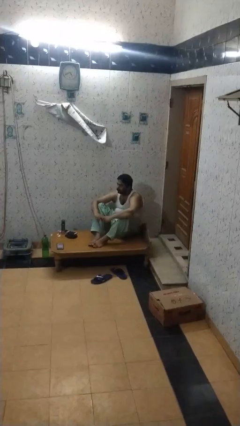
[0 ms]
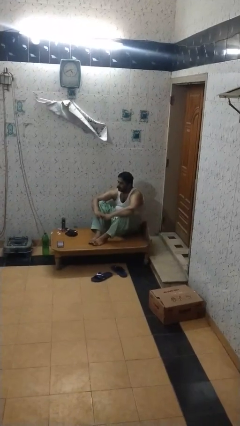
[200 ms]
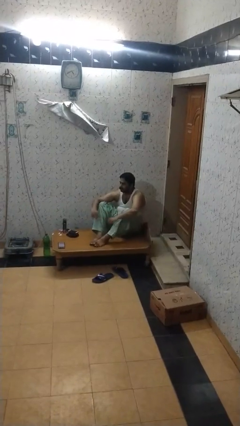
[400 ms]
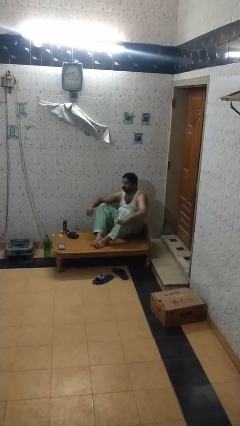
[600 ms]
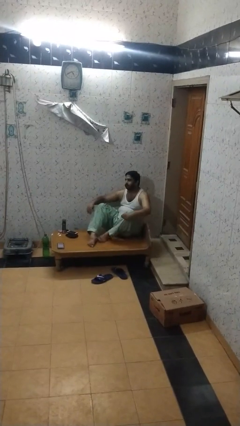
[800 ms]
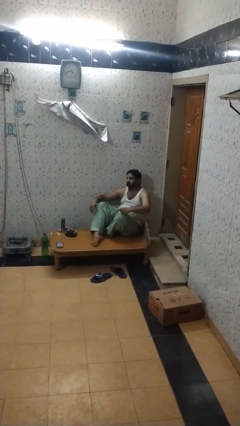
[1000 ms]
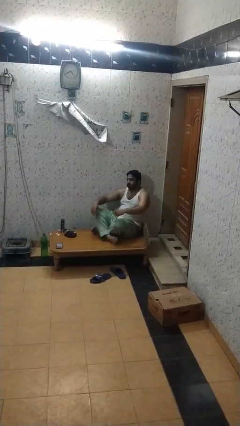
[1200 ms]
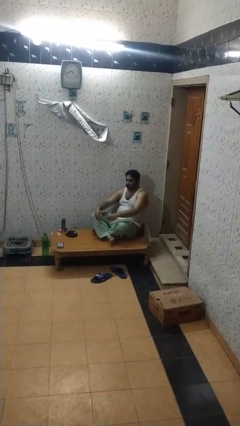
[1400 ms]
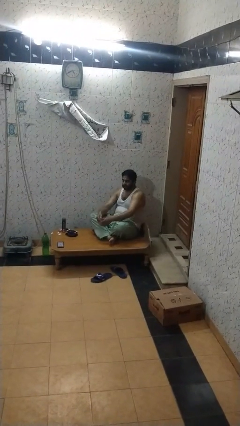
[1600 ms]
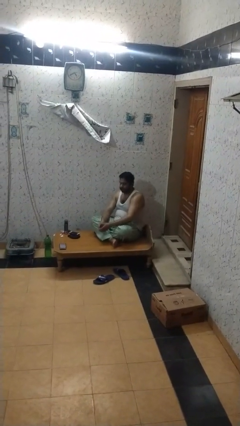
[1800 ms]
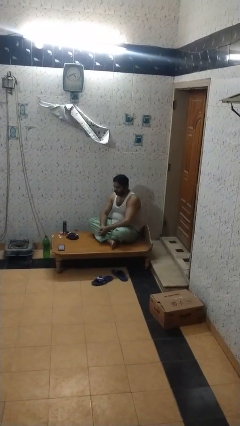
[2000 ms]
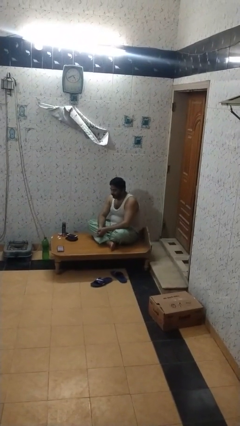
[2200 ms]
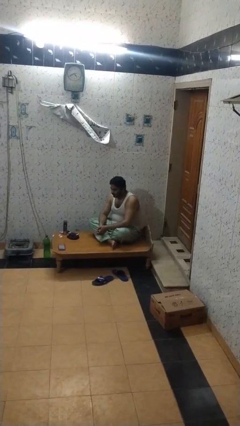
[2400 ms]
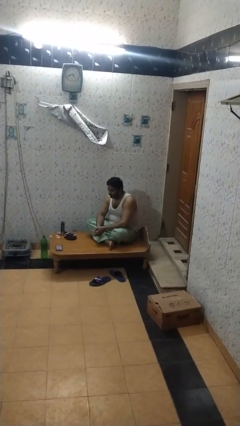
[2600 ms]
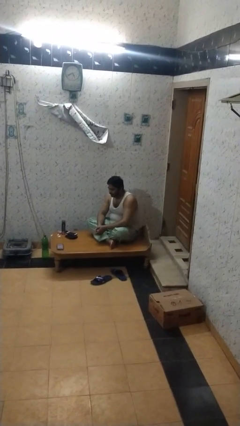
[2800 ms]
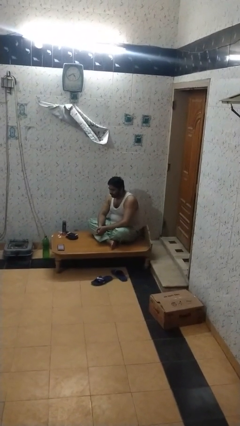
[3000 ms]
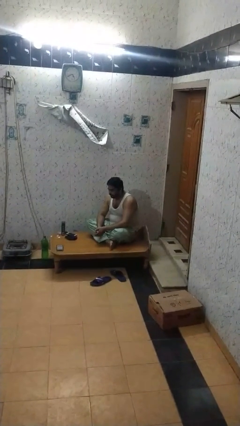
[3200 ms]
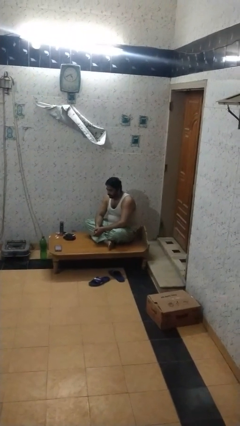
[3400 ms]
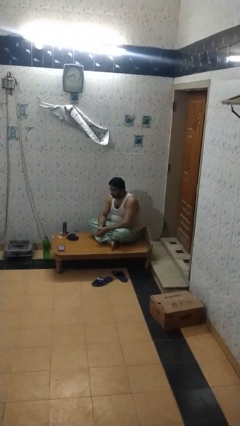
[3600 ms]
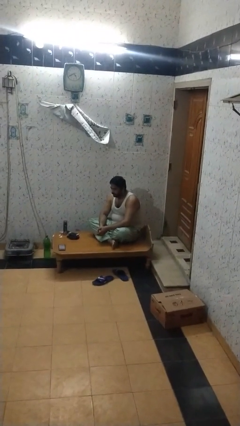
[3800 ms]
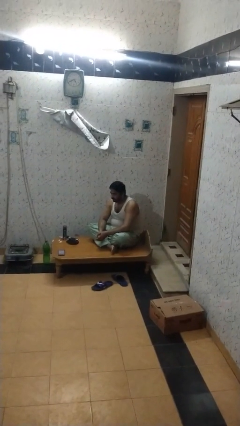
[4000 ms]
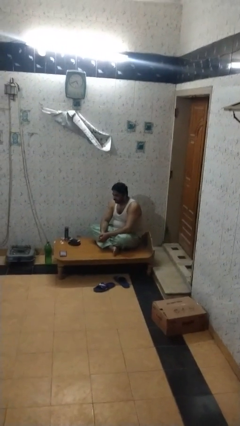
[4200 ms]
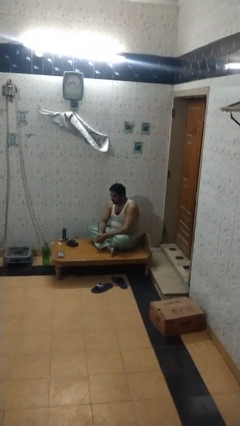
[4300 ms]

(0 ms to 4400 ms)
person crosses legs

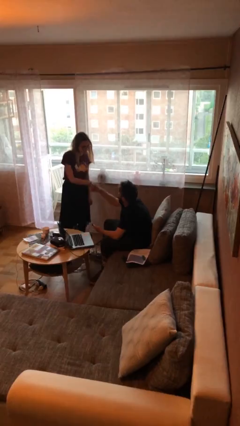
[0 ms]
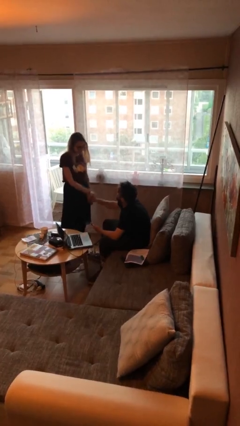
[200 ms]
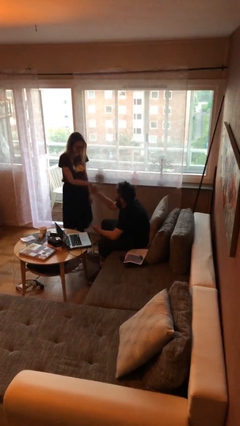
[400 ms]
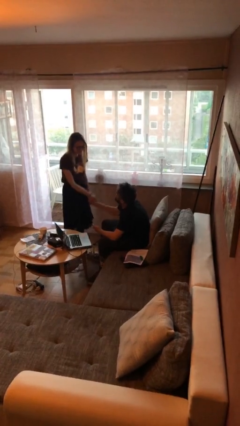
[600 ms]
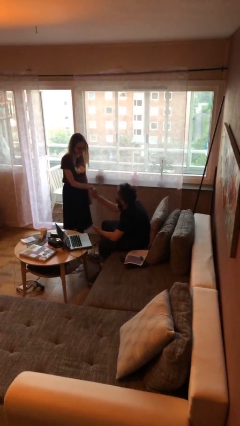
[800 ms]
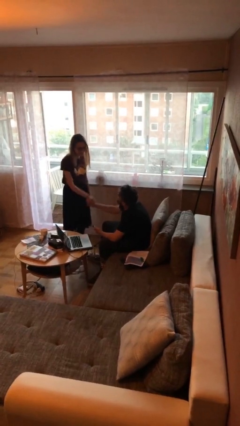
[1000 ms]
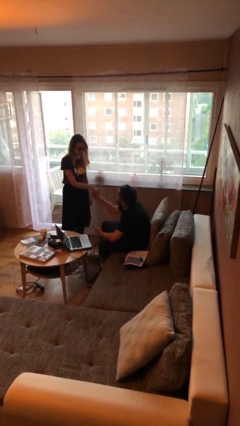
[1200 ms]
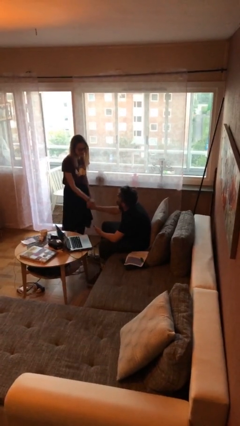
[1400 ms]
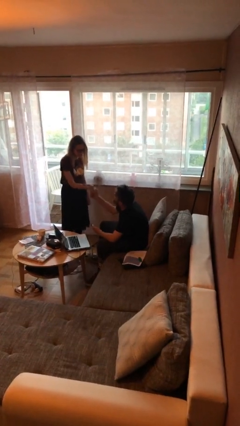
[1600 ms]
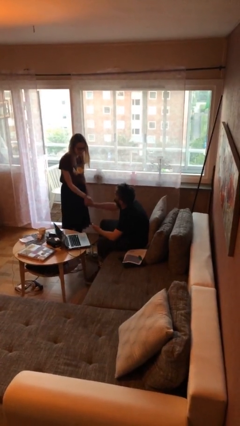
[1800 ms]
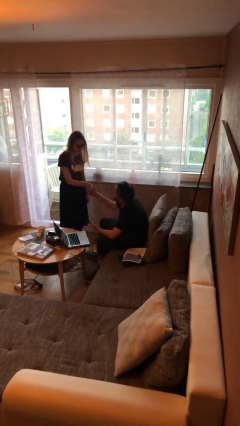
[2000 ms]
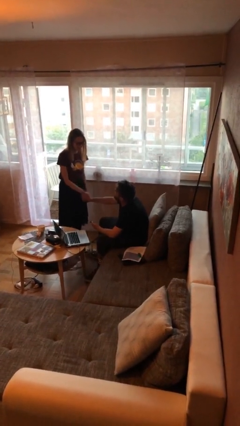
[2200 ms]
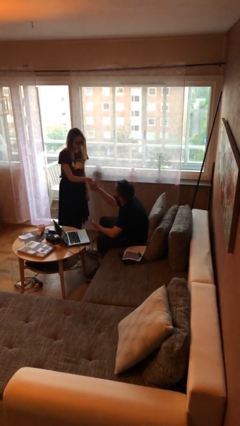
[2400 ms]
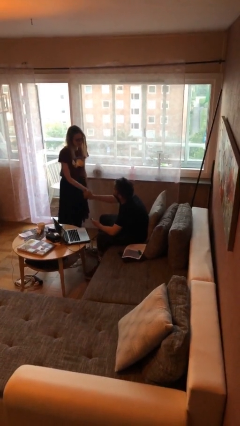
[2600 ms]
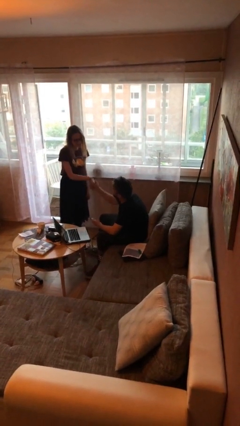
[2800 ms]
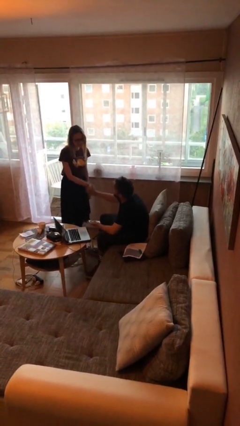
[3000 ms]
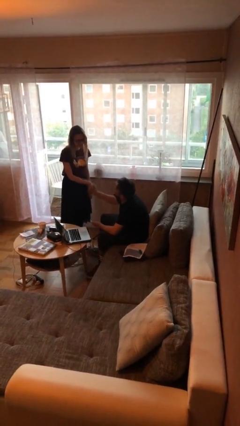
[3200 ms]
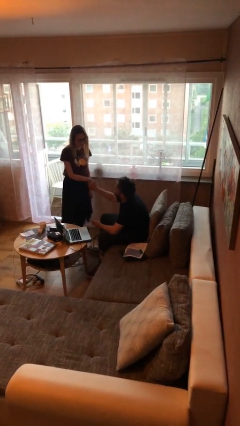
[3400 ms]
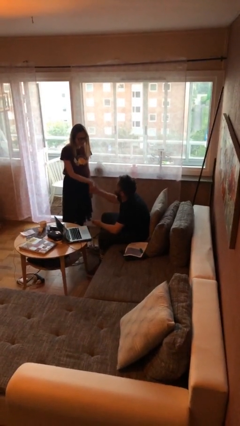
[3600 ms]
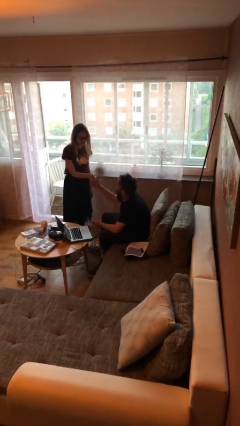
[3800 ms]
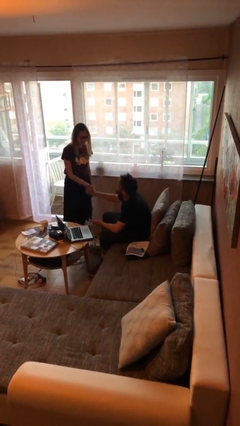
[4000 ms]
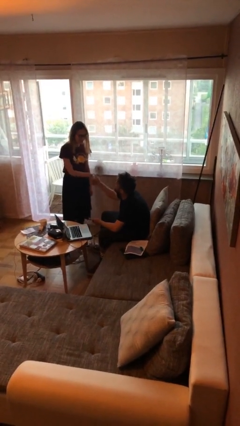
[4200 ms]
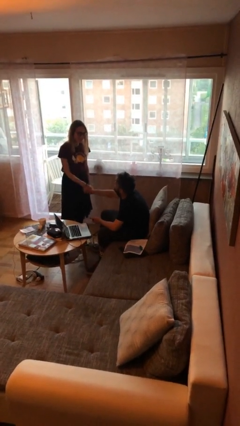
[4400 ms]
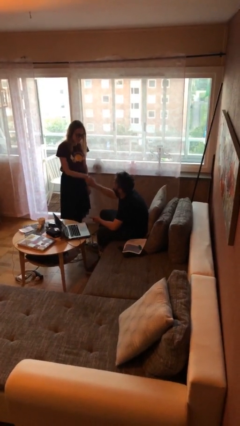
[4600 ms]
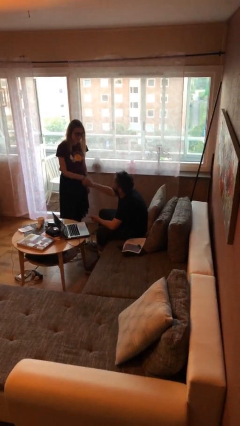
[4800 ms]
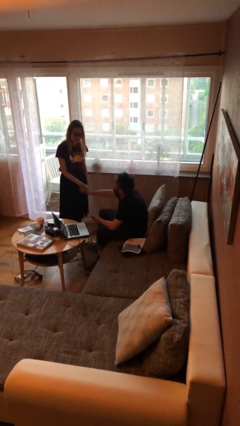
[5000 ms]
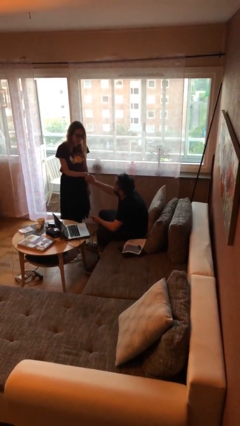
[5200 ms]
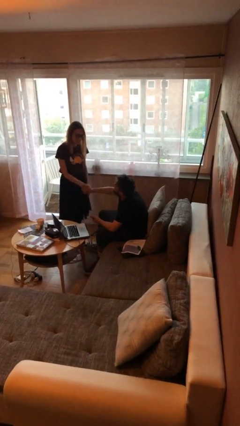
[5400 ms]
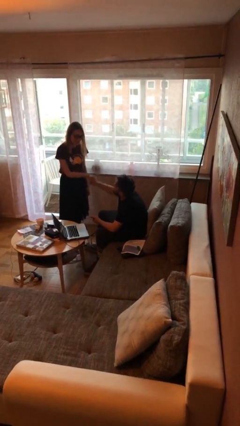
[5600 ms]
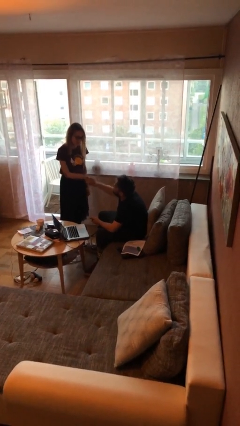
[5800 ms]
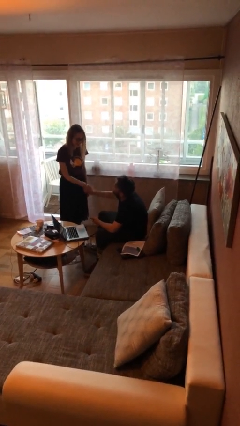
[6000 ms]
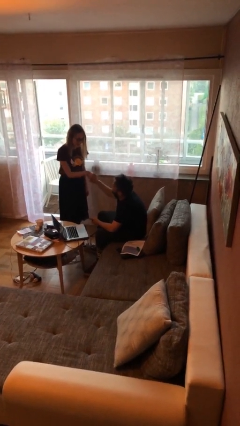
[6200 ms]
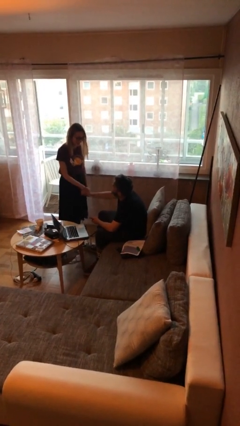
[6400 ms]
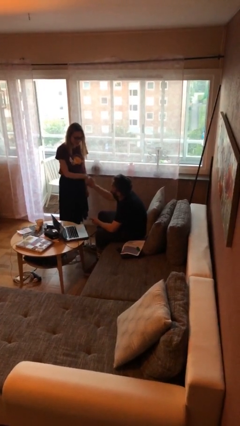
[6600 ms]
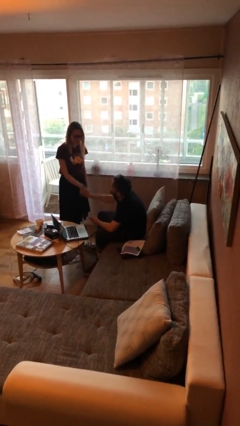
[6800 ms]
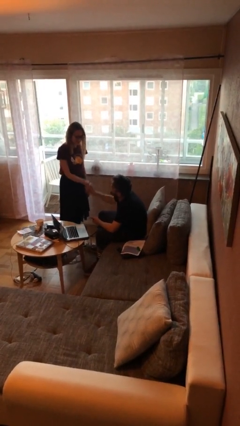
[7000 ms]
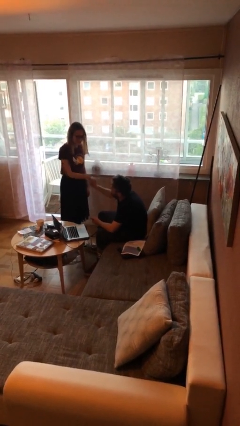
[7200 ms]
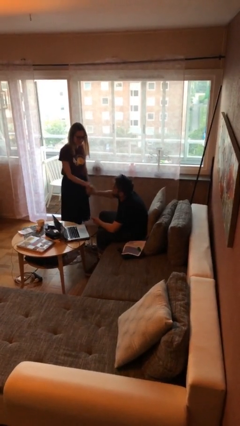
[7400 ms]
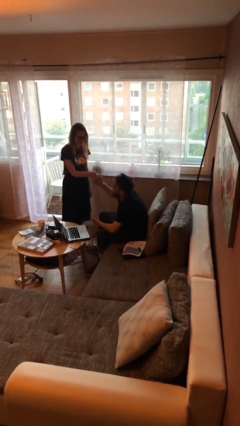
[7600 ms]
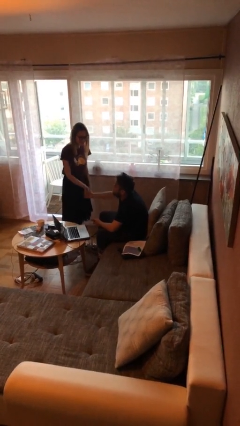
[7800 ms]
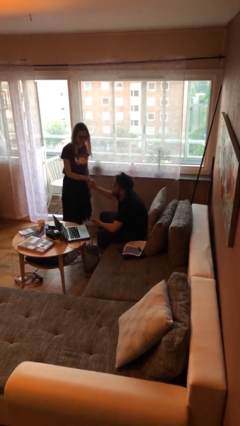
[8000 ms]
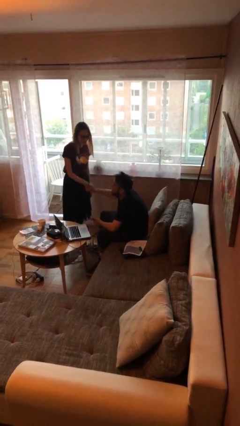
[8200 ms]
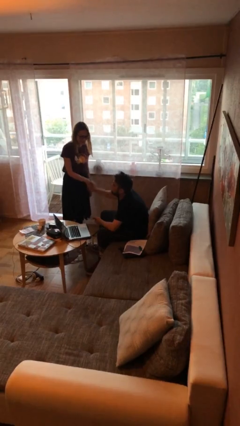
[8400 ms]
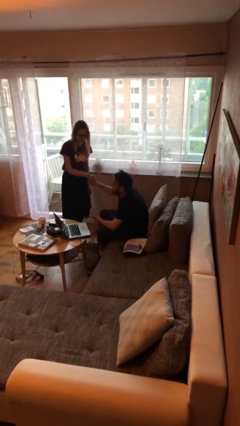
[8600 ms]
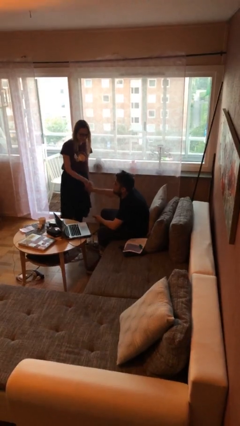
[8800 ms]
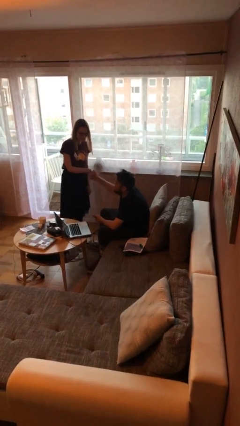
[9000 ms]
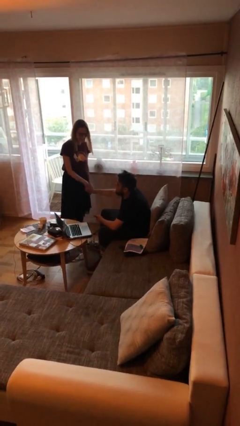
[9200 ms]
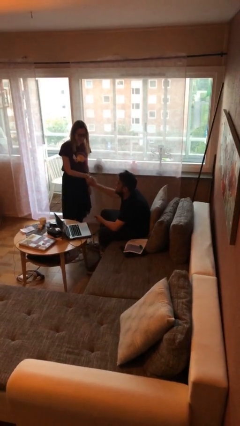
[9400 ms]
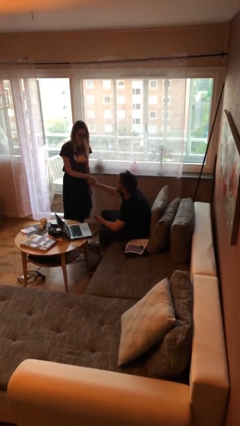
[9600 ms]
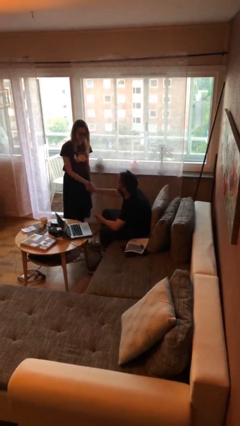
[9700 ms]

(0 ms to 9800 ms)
person shakes hand

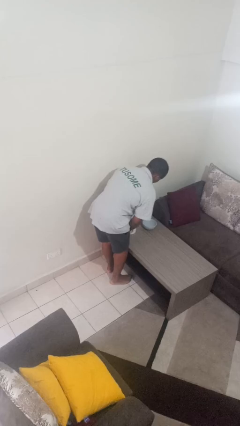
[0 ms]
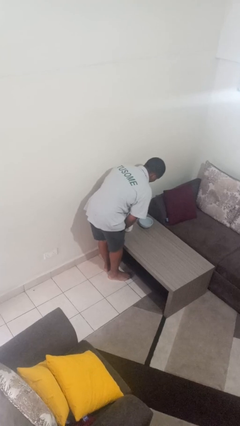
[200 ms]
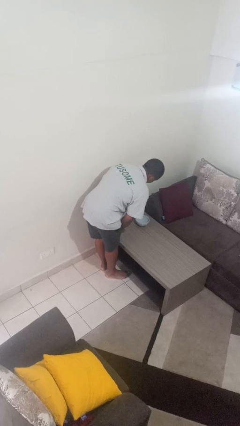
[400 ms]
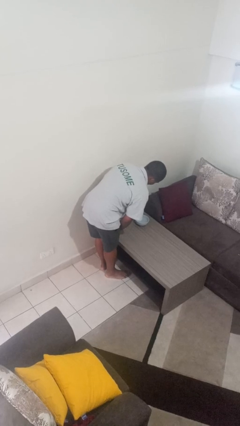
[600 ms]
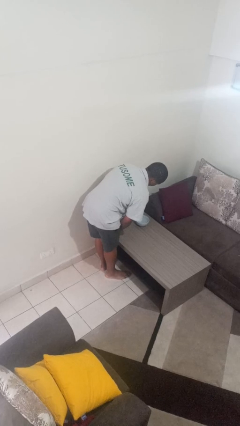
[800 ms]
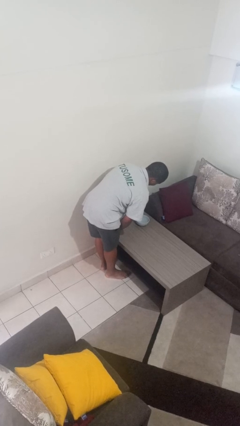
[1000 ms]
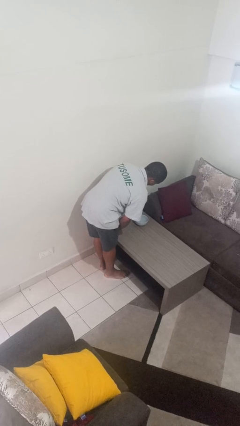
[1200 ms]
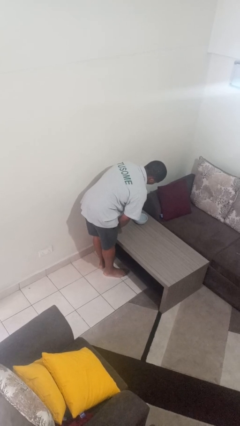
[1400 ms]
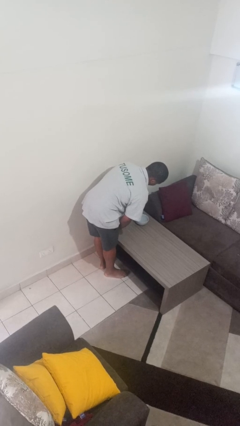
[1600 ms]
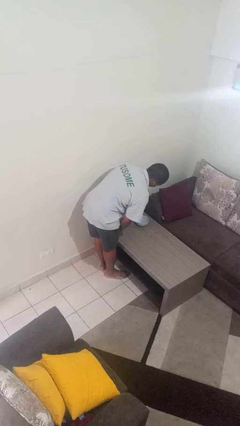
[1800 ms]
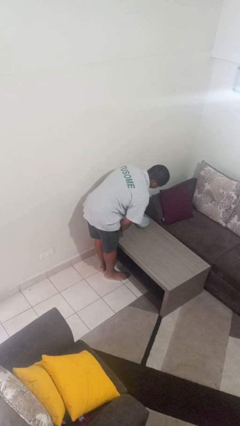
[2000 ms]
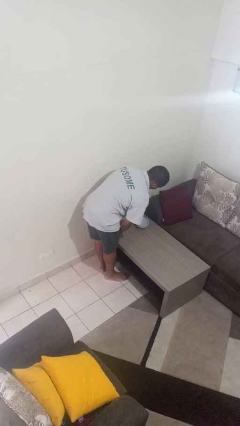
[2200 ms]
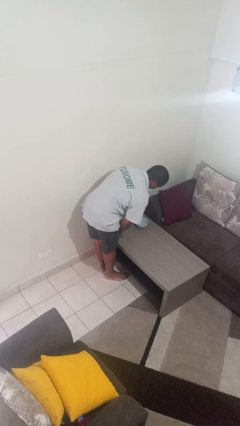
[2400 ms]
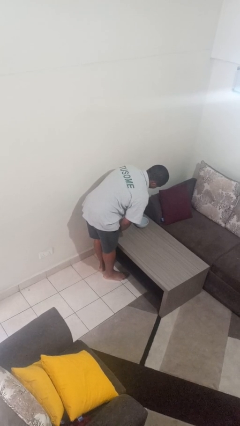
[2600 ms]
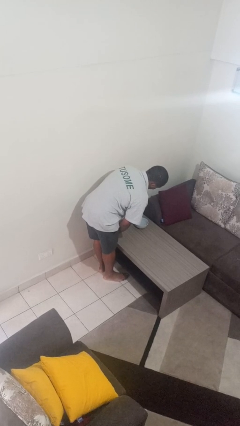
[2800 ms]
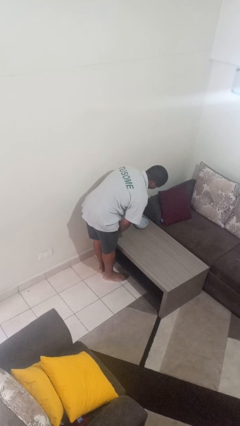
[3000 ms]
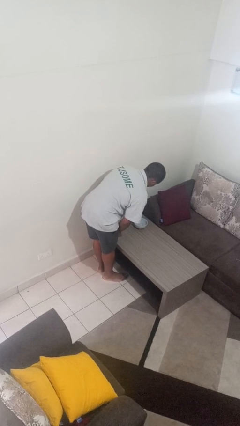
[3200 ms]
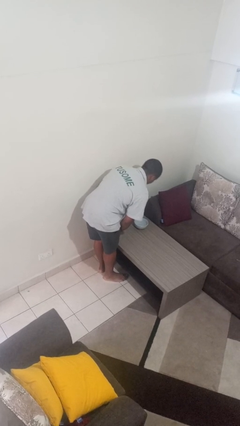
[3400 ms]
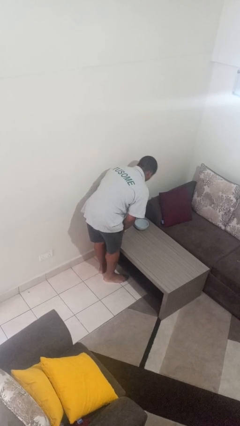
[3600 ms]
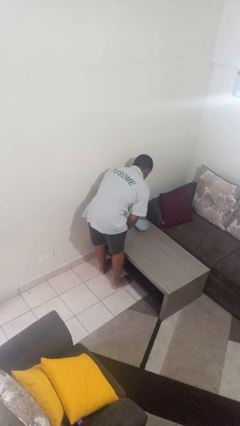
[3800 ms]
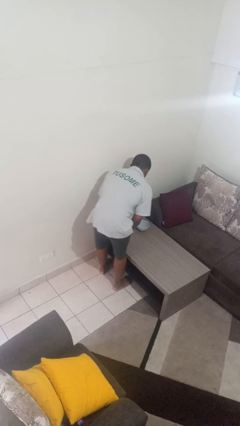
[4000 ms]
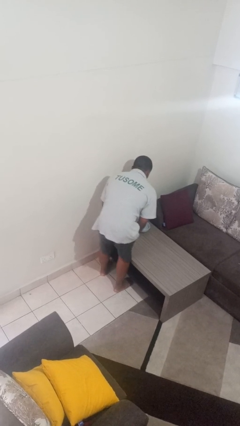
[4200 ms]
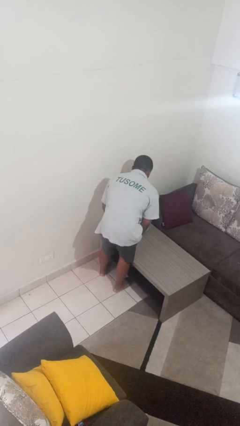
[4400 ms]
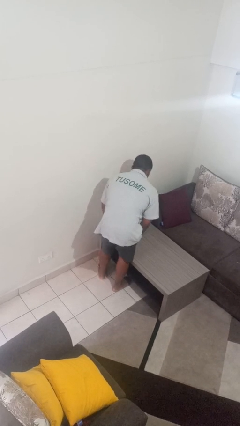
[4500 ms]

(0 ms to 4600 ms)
person pours into bowl
